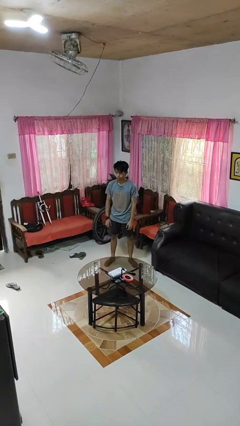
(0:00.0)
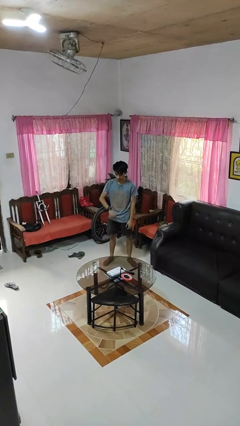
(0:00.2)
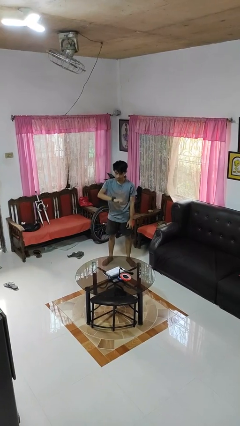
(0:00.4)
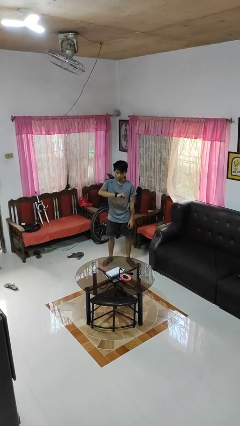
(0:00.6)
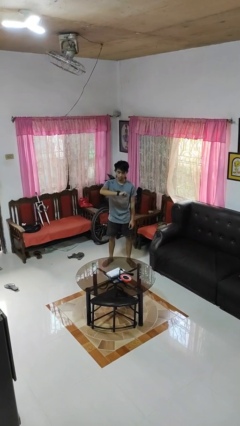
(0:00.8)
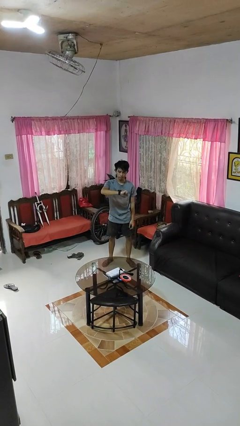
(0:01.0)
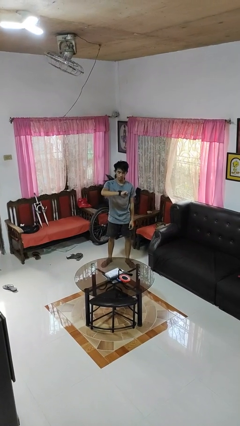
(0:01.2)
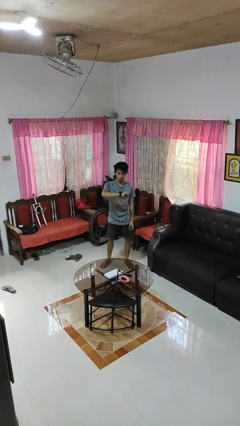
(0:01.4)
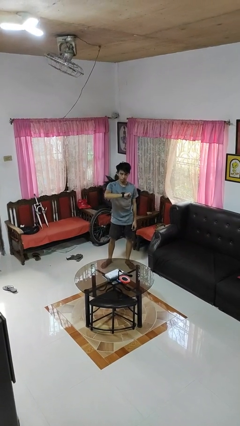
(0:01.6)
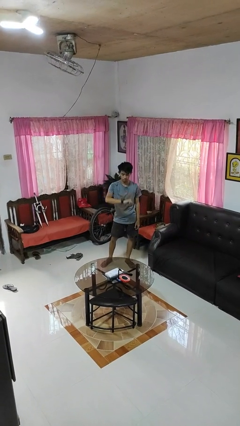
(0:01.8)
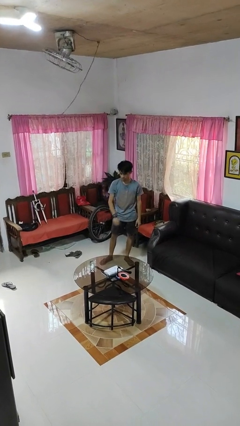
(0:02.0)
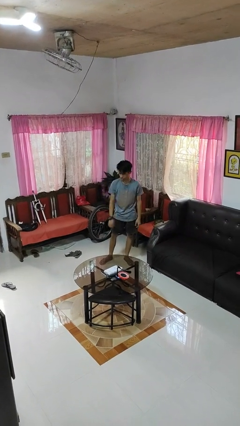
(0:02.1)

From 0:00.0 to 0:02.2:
person looks at wristwatch

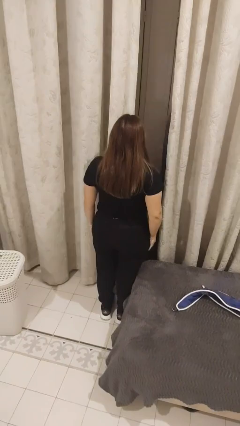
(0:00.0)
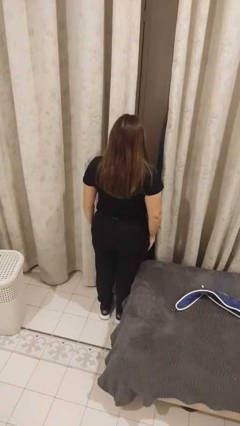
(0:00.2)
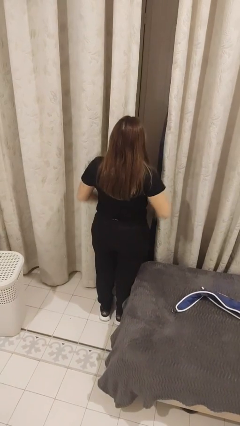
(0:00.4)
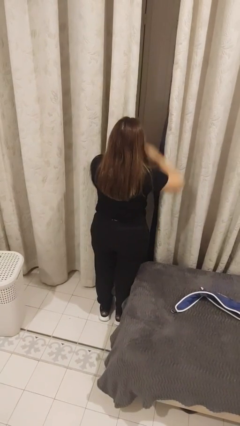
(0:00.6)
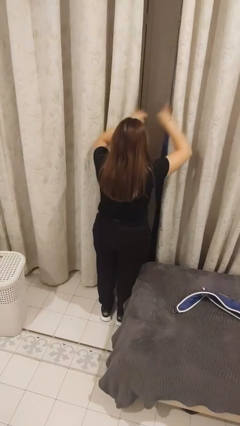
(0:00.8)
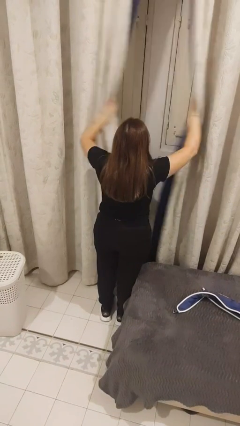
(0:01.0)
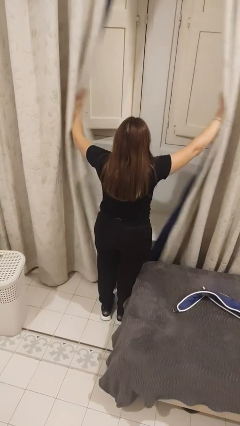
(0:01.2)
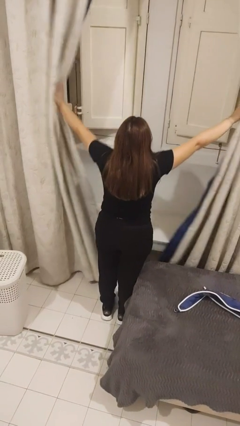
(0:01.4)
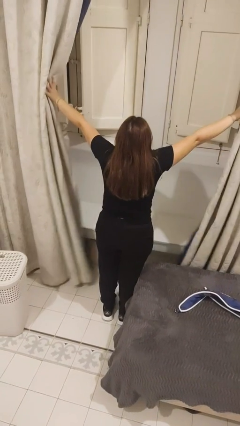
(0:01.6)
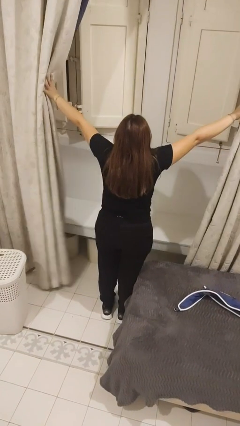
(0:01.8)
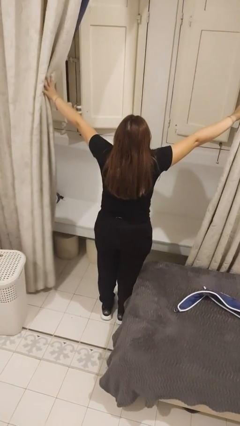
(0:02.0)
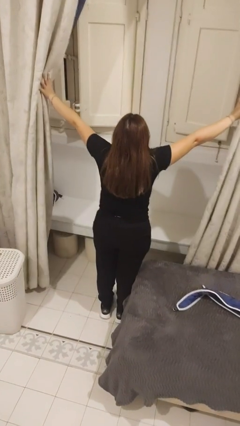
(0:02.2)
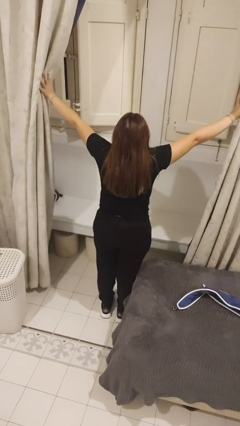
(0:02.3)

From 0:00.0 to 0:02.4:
person opens curtains

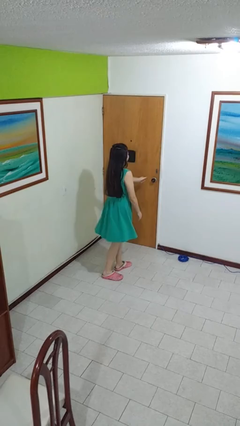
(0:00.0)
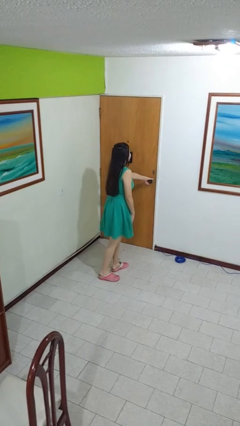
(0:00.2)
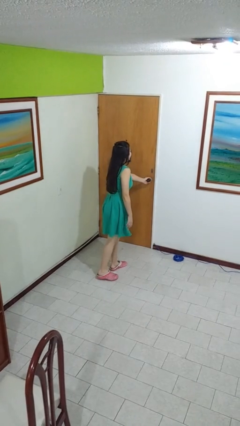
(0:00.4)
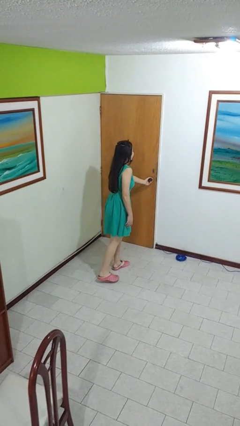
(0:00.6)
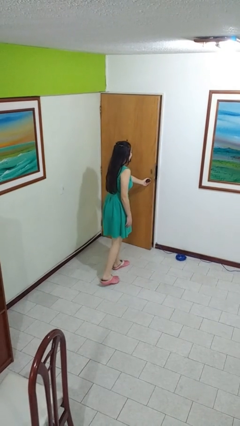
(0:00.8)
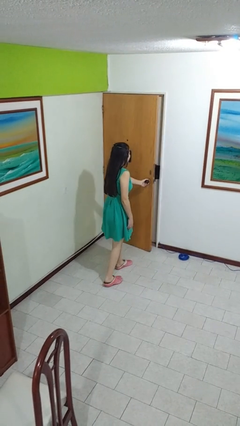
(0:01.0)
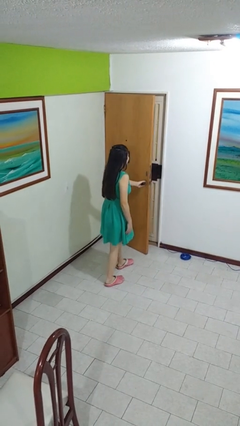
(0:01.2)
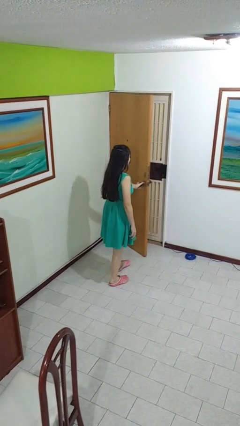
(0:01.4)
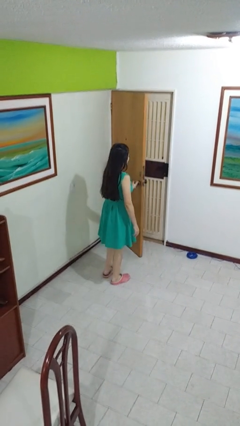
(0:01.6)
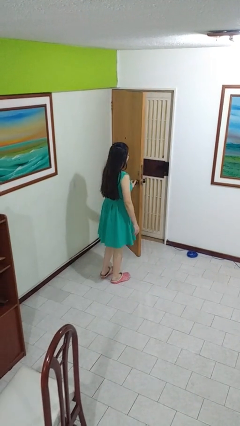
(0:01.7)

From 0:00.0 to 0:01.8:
person opens facility door

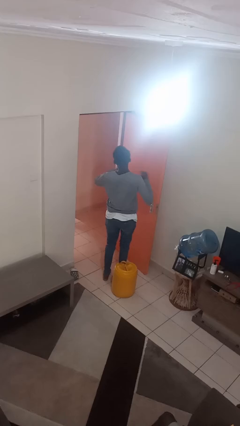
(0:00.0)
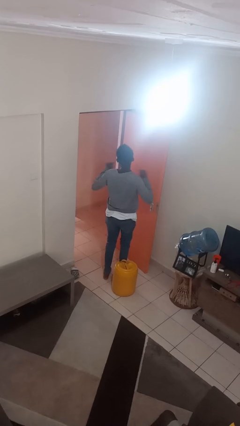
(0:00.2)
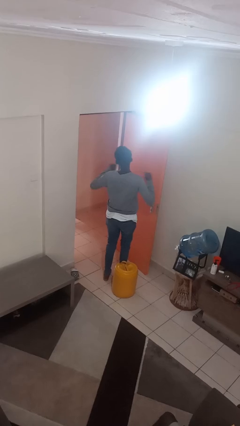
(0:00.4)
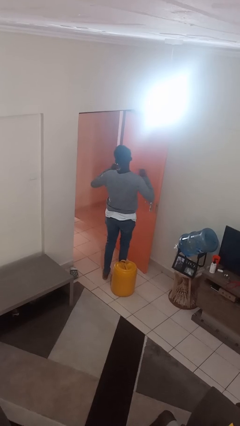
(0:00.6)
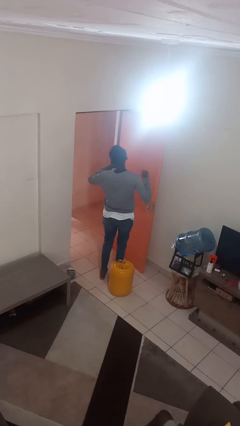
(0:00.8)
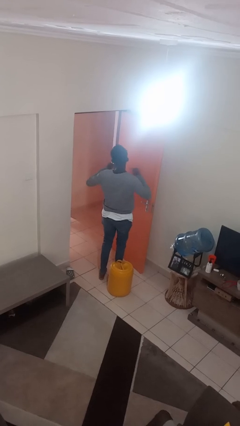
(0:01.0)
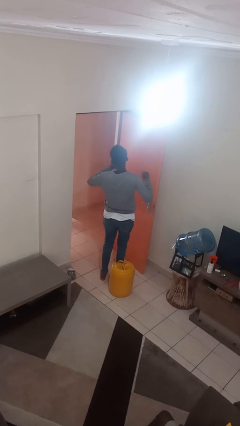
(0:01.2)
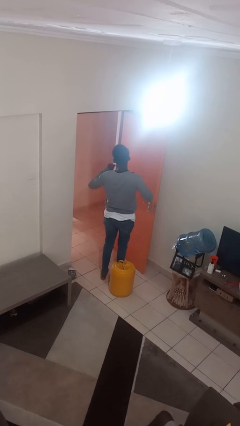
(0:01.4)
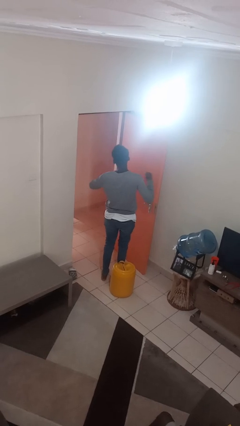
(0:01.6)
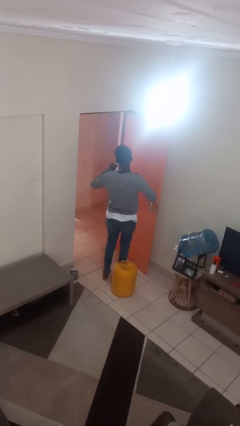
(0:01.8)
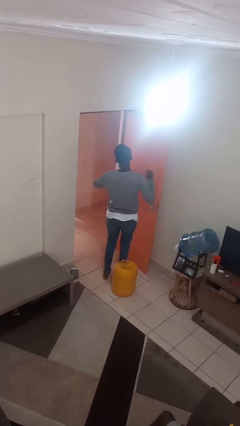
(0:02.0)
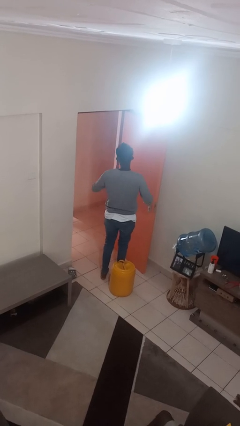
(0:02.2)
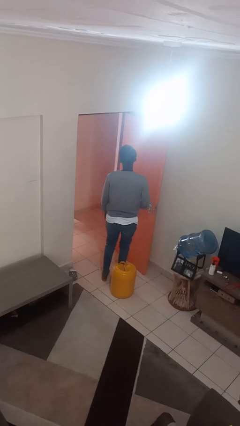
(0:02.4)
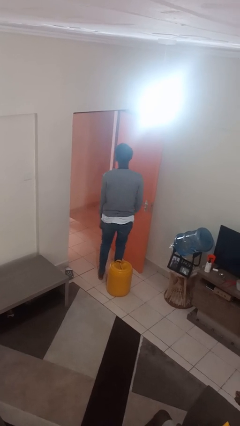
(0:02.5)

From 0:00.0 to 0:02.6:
person drums on chest

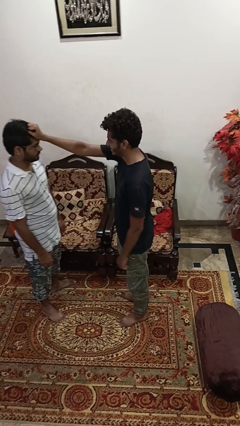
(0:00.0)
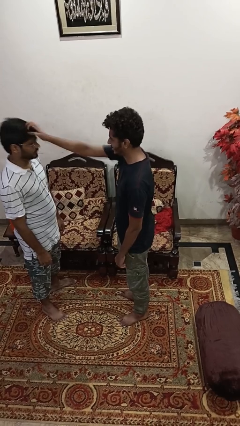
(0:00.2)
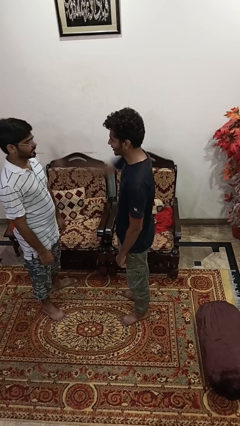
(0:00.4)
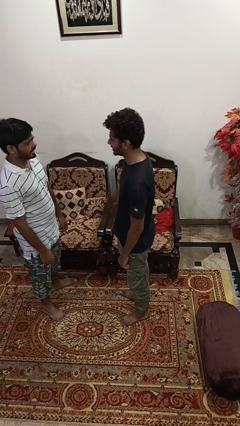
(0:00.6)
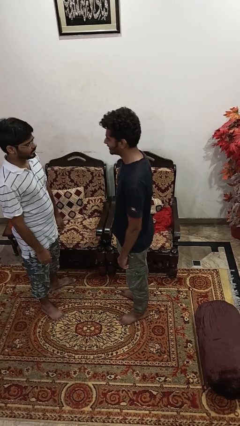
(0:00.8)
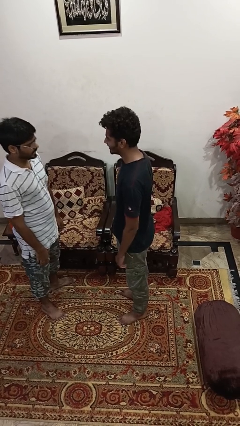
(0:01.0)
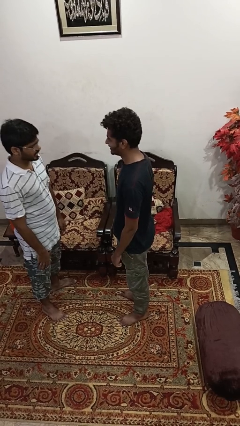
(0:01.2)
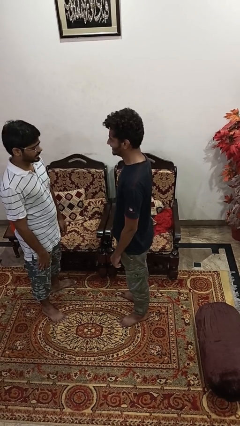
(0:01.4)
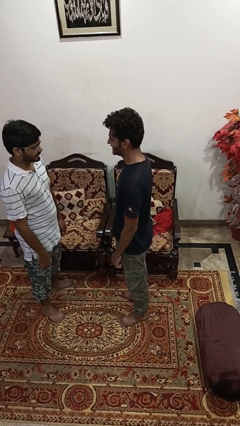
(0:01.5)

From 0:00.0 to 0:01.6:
person spins person around

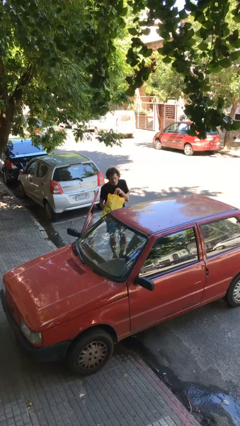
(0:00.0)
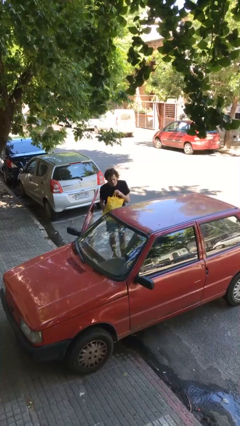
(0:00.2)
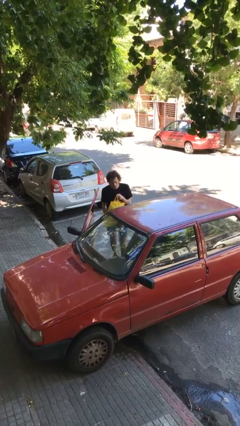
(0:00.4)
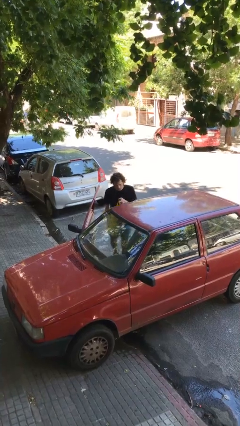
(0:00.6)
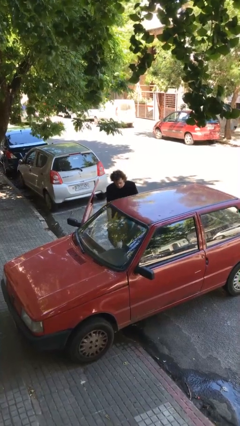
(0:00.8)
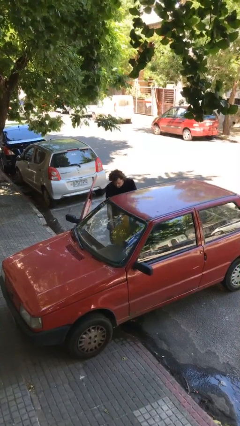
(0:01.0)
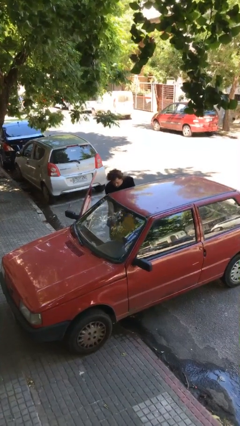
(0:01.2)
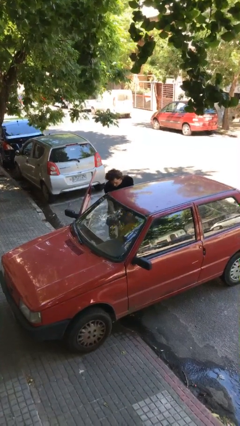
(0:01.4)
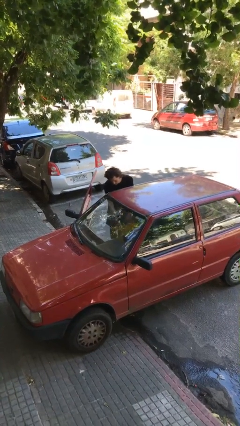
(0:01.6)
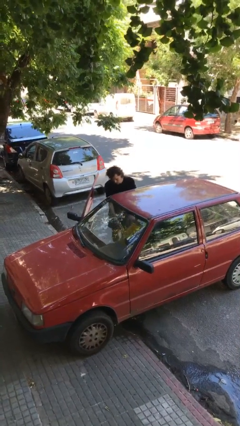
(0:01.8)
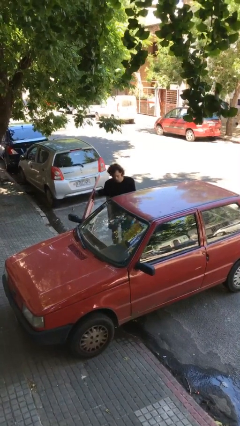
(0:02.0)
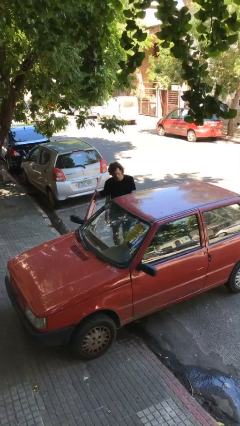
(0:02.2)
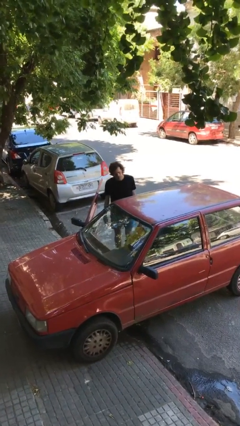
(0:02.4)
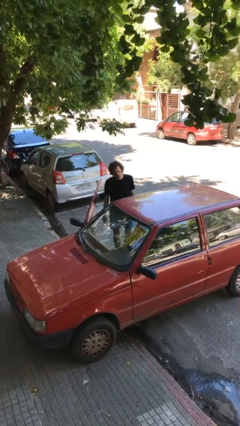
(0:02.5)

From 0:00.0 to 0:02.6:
person loads car

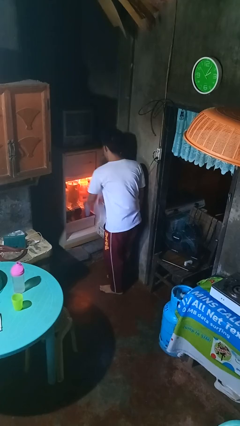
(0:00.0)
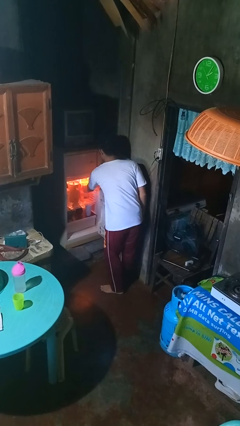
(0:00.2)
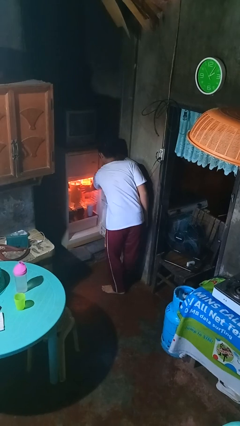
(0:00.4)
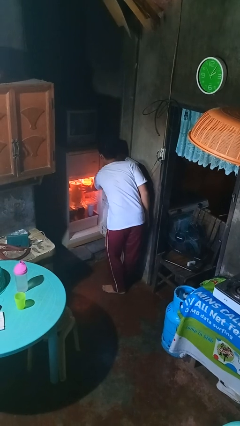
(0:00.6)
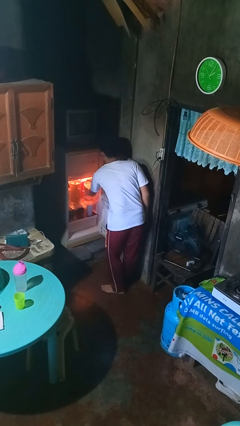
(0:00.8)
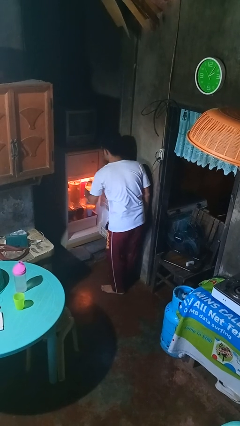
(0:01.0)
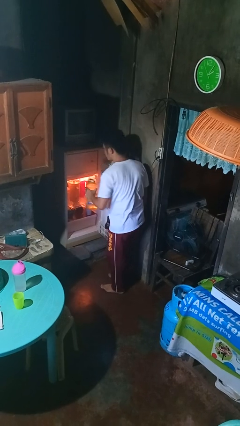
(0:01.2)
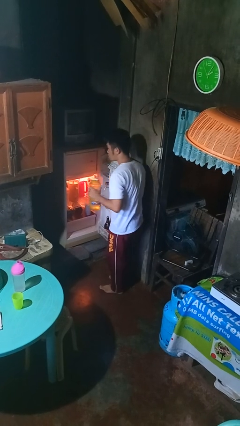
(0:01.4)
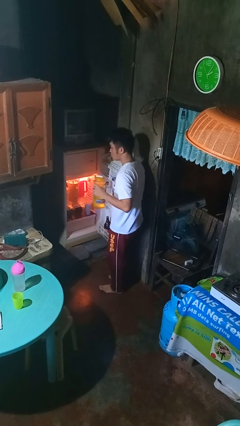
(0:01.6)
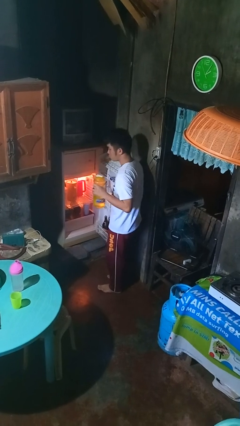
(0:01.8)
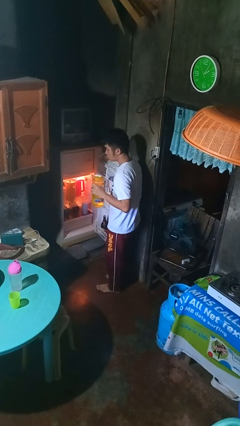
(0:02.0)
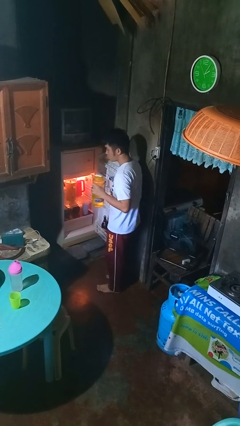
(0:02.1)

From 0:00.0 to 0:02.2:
person takes object from refrigerator

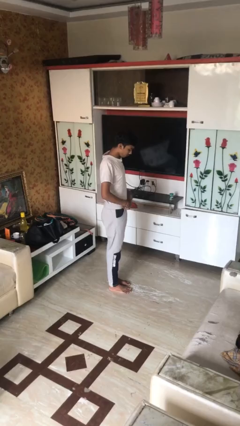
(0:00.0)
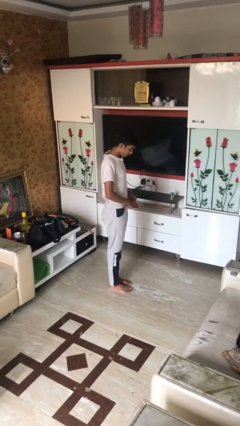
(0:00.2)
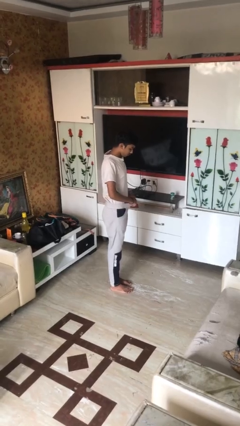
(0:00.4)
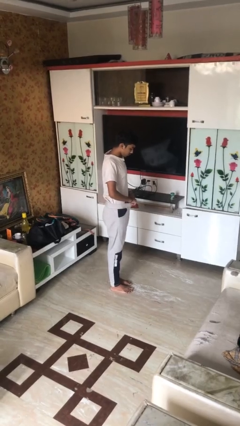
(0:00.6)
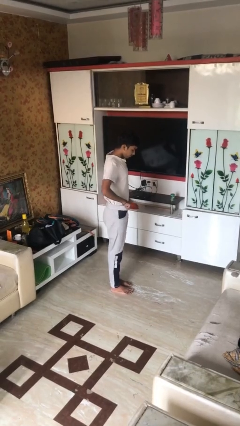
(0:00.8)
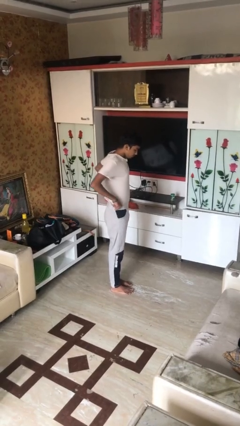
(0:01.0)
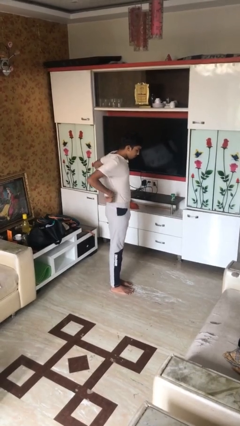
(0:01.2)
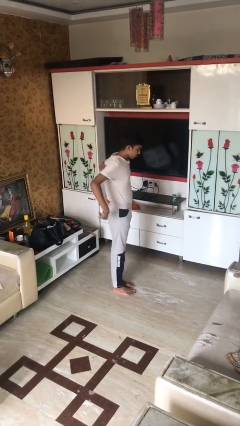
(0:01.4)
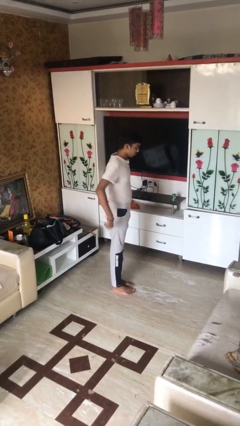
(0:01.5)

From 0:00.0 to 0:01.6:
person hikes up pants

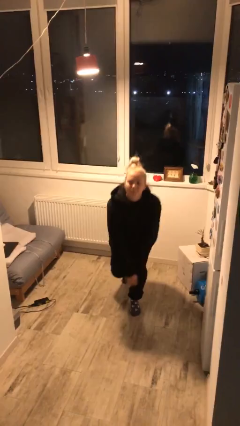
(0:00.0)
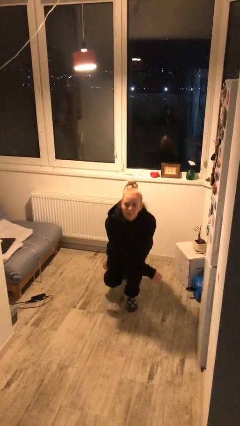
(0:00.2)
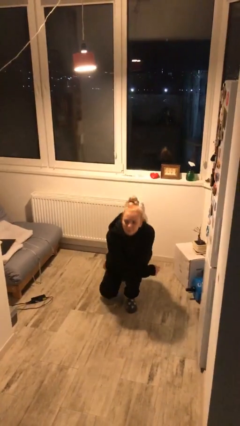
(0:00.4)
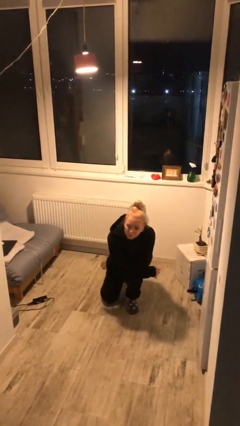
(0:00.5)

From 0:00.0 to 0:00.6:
person sits down
